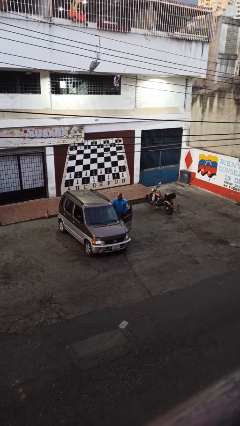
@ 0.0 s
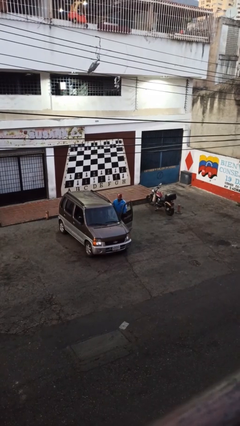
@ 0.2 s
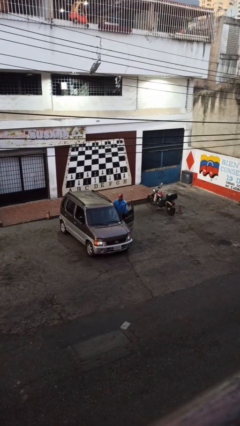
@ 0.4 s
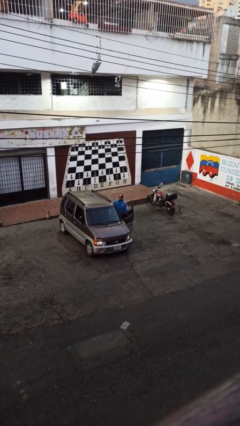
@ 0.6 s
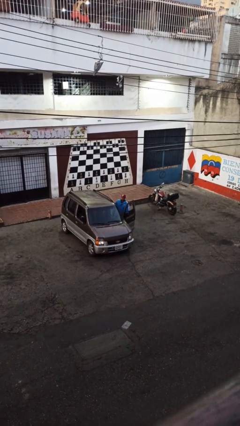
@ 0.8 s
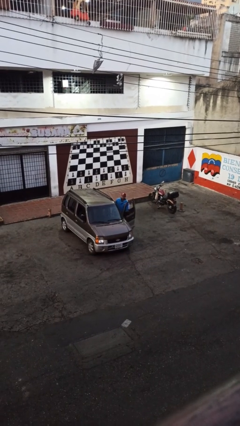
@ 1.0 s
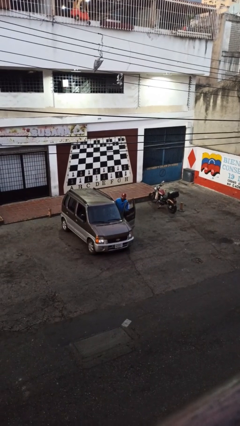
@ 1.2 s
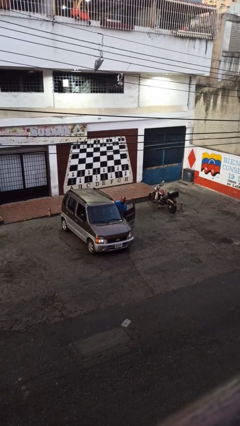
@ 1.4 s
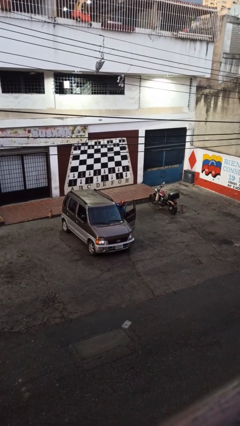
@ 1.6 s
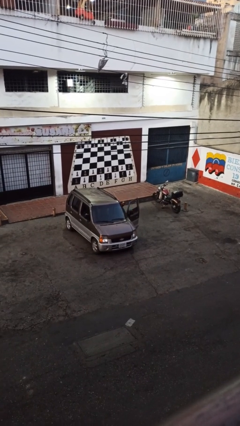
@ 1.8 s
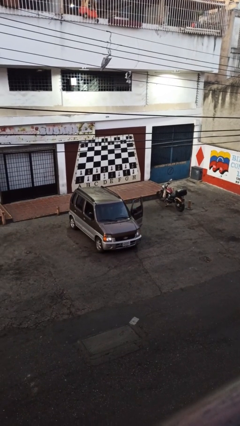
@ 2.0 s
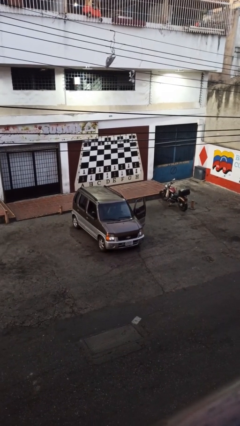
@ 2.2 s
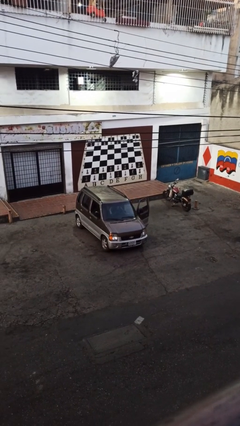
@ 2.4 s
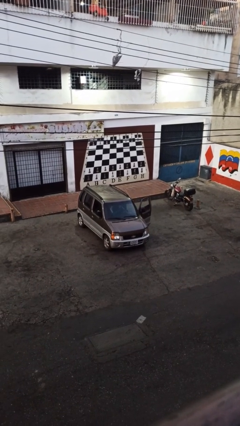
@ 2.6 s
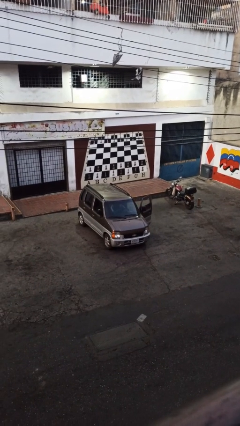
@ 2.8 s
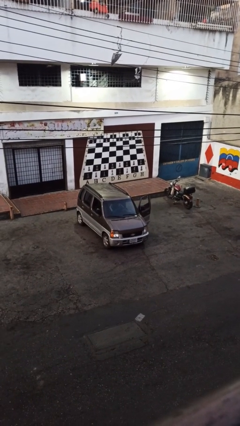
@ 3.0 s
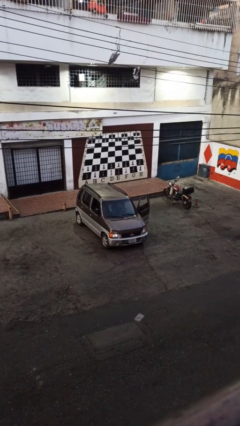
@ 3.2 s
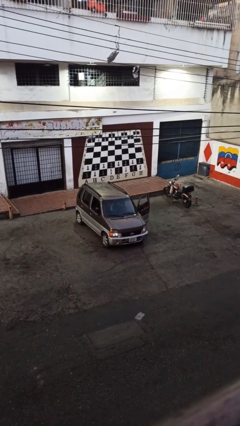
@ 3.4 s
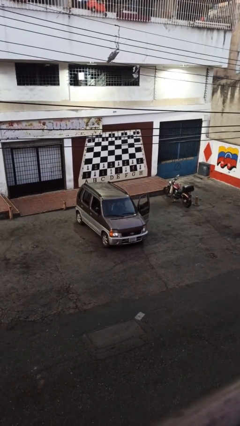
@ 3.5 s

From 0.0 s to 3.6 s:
person enters car

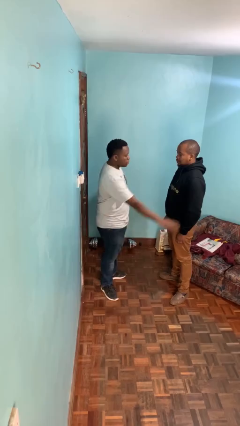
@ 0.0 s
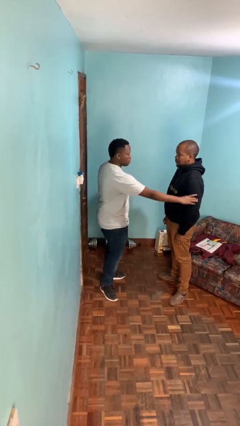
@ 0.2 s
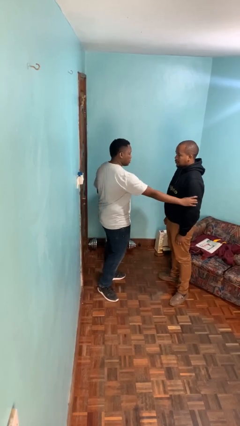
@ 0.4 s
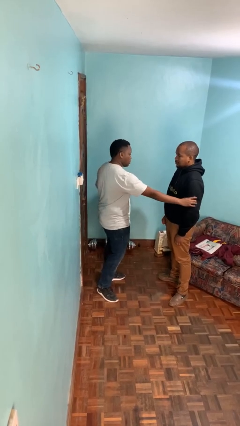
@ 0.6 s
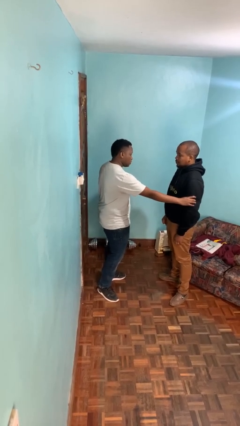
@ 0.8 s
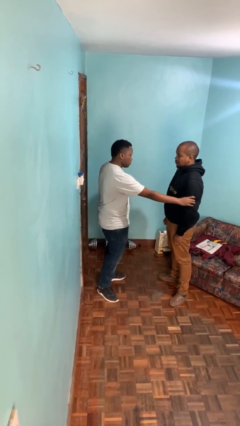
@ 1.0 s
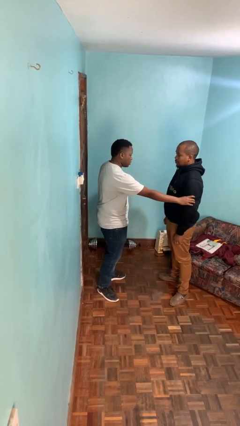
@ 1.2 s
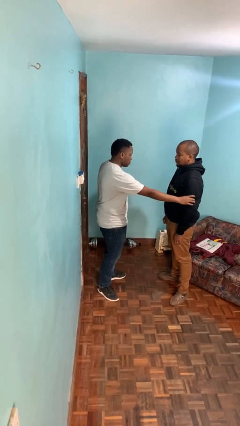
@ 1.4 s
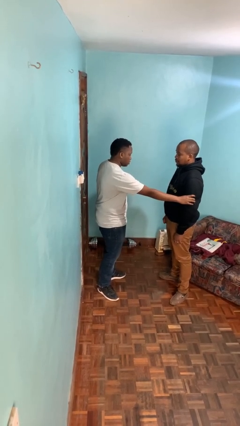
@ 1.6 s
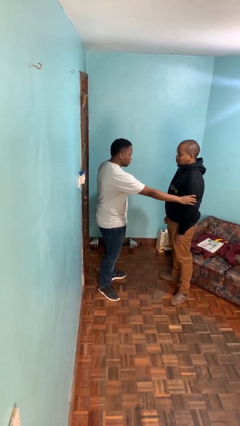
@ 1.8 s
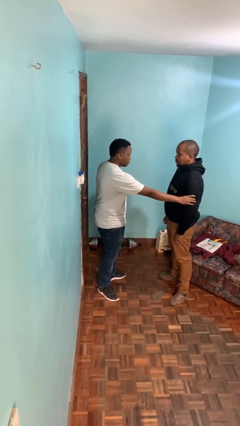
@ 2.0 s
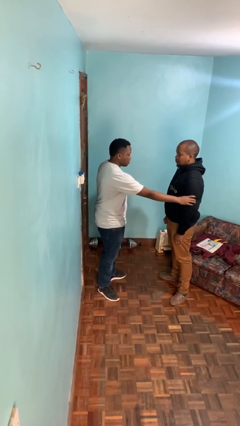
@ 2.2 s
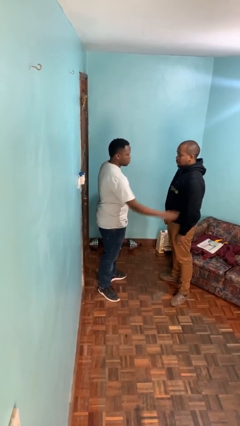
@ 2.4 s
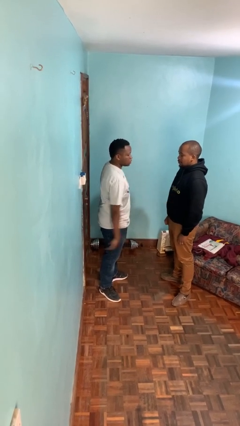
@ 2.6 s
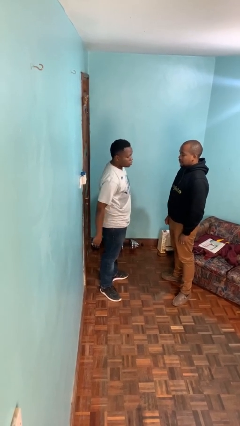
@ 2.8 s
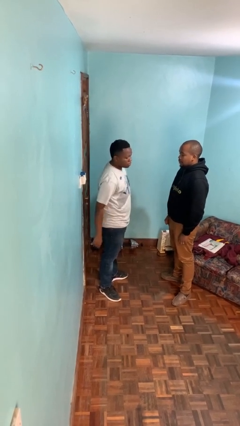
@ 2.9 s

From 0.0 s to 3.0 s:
person grabs person by bicep

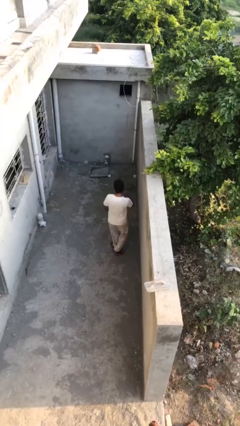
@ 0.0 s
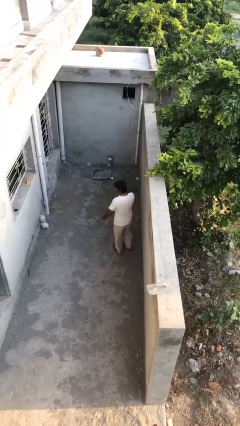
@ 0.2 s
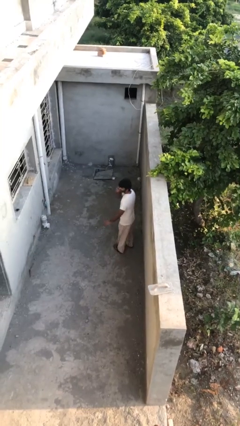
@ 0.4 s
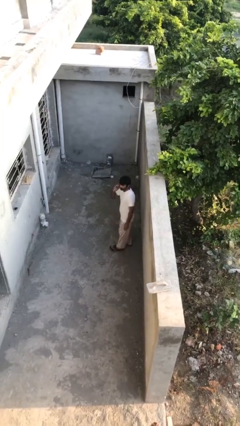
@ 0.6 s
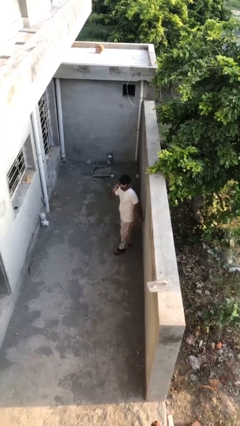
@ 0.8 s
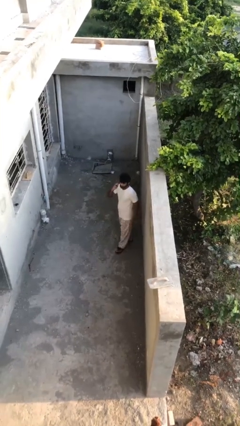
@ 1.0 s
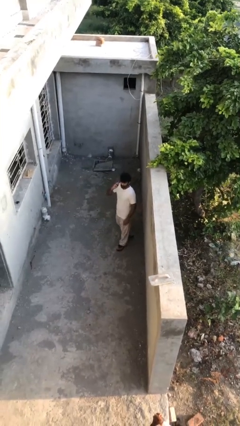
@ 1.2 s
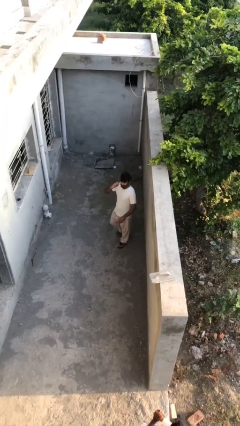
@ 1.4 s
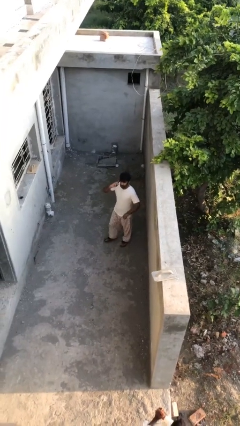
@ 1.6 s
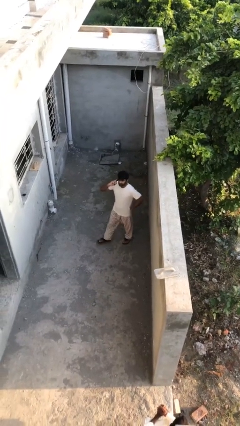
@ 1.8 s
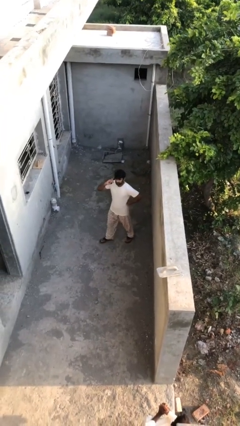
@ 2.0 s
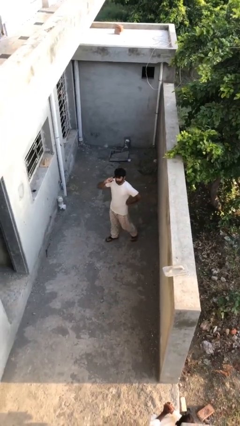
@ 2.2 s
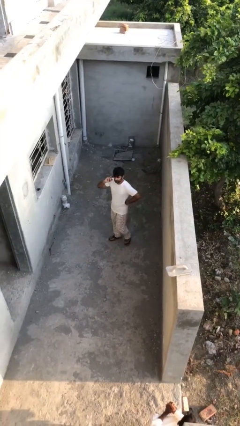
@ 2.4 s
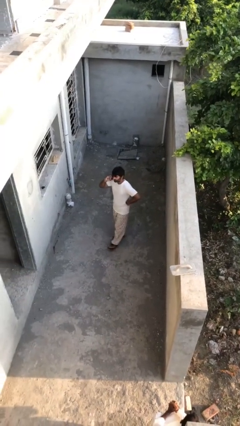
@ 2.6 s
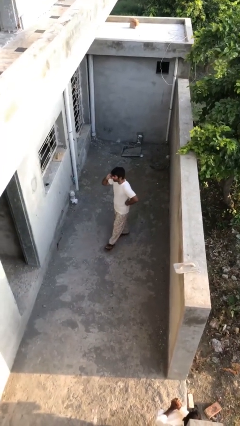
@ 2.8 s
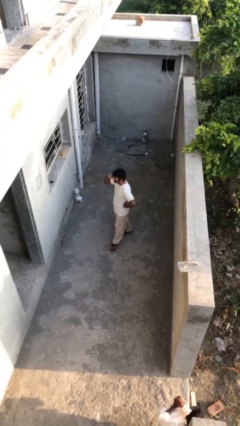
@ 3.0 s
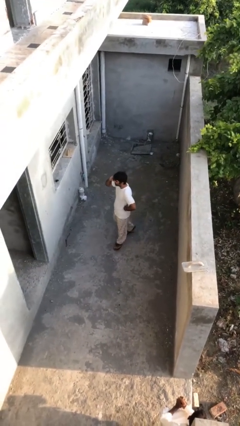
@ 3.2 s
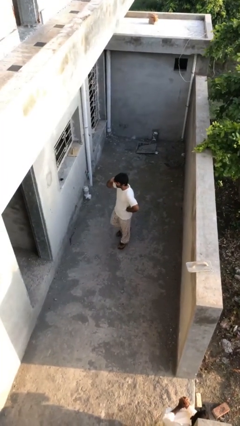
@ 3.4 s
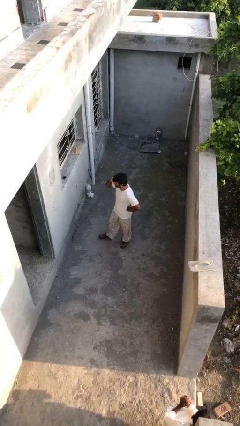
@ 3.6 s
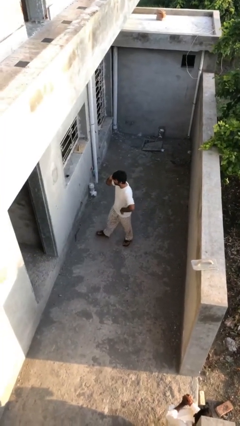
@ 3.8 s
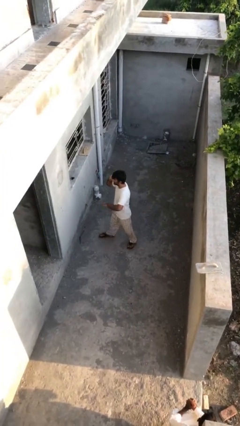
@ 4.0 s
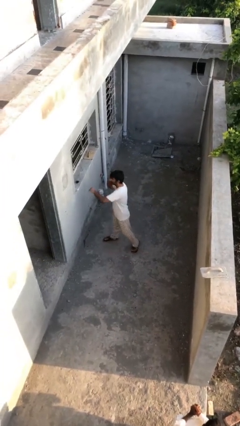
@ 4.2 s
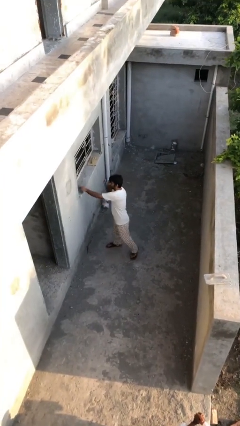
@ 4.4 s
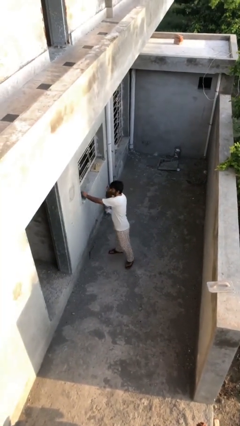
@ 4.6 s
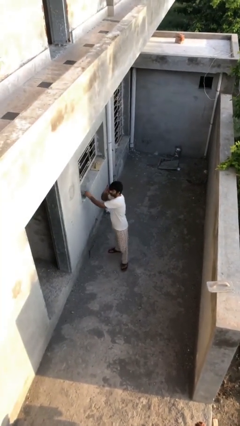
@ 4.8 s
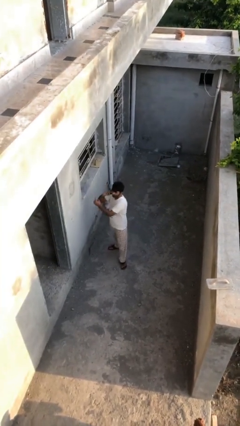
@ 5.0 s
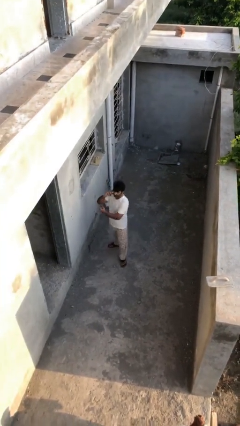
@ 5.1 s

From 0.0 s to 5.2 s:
person talks on phone

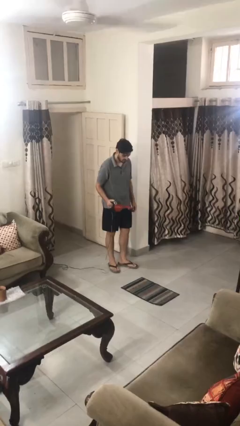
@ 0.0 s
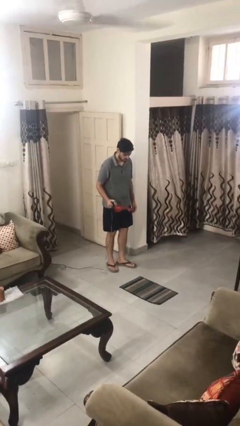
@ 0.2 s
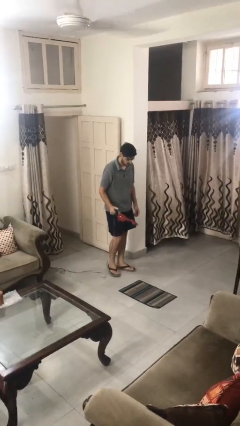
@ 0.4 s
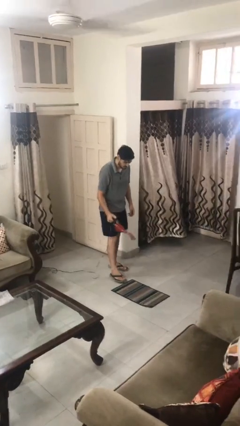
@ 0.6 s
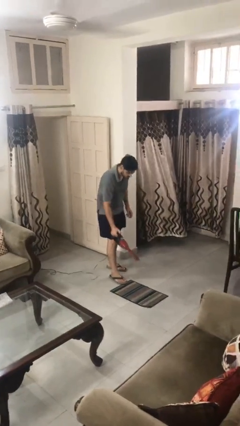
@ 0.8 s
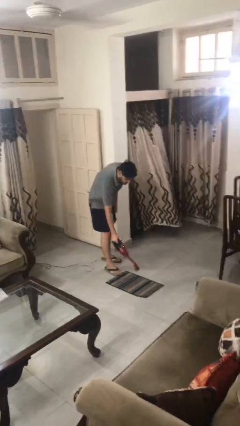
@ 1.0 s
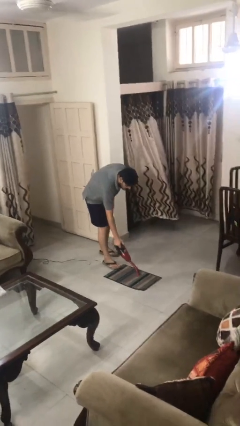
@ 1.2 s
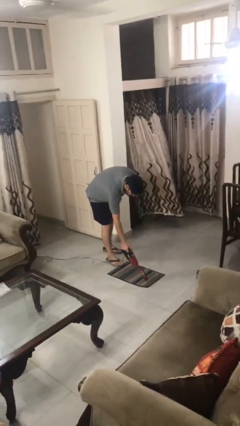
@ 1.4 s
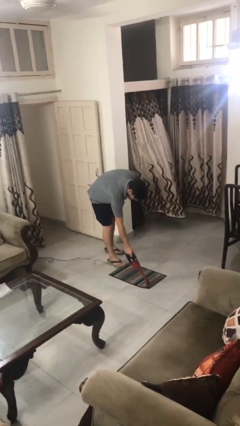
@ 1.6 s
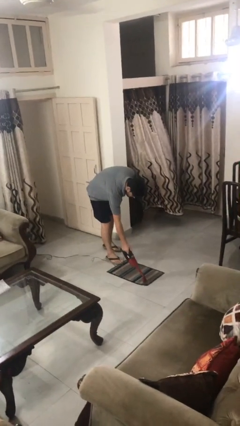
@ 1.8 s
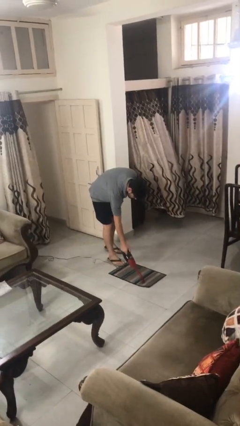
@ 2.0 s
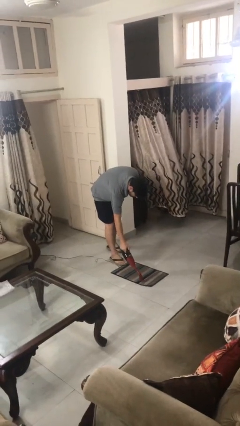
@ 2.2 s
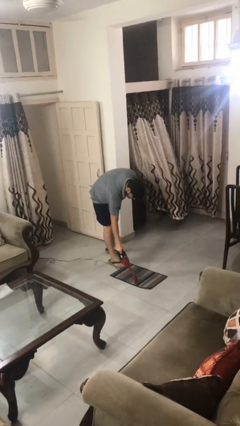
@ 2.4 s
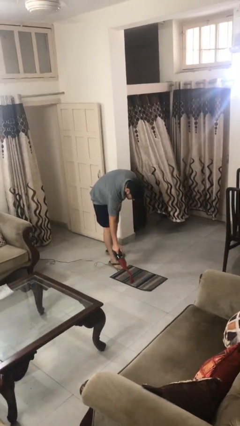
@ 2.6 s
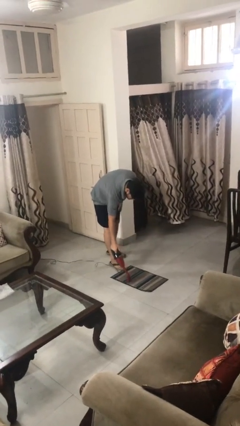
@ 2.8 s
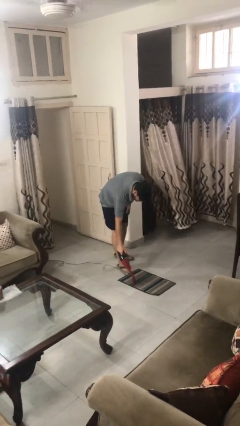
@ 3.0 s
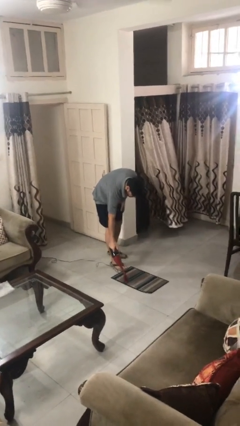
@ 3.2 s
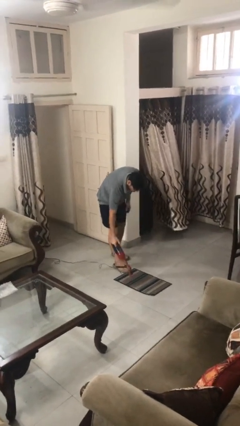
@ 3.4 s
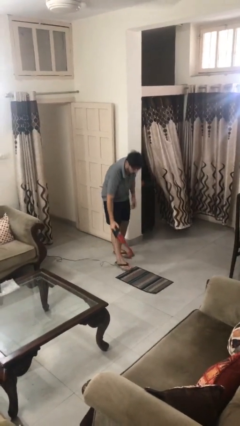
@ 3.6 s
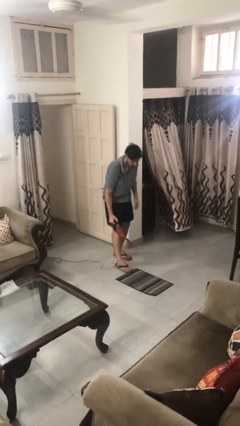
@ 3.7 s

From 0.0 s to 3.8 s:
person vacuums carpet

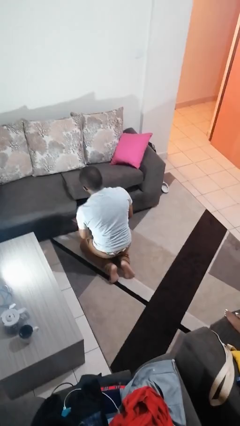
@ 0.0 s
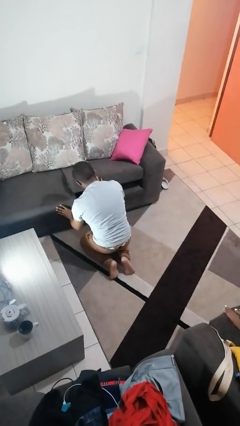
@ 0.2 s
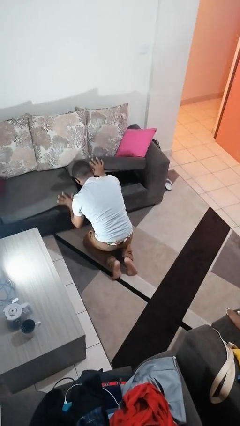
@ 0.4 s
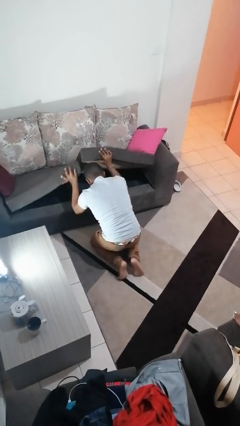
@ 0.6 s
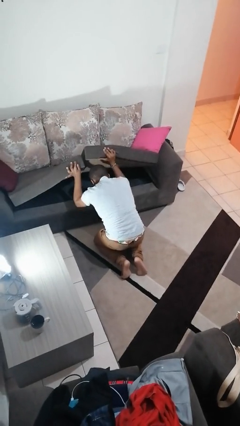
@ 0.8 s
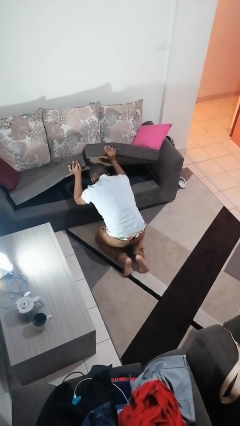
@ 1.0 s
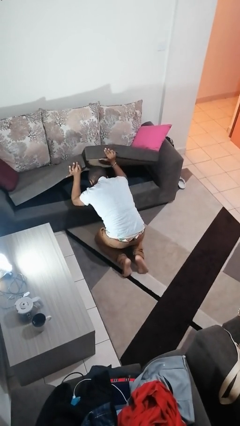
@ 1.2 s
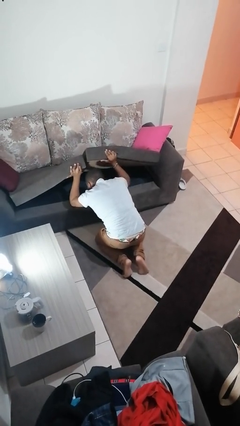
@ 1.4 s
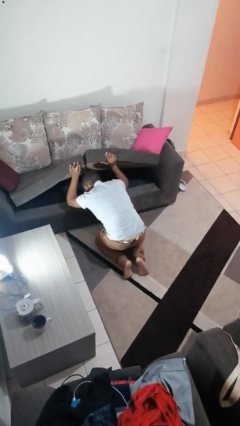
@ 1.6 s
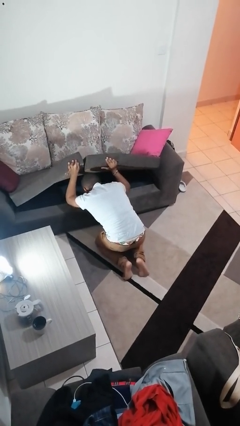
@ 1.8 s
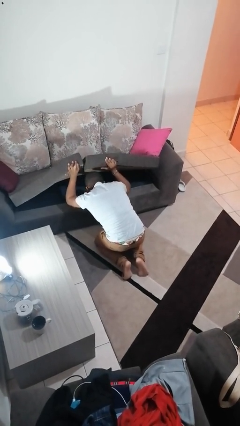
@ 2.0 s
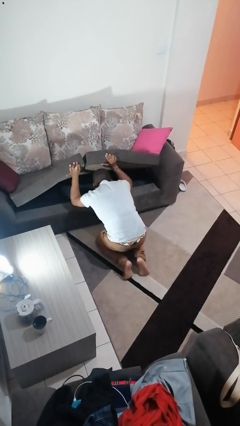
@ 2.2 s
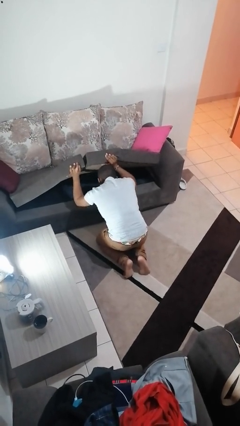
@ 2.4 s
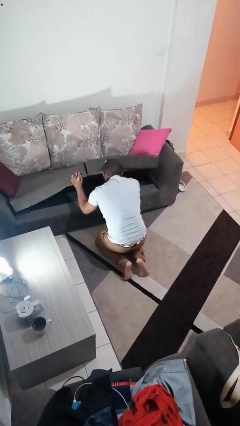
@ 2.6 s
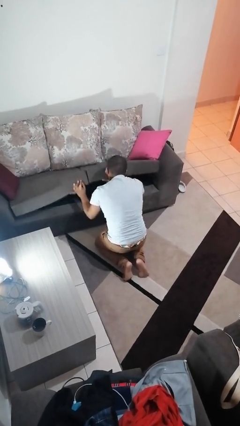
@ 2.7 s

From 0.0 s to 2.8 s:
person searches under couch
